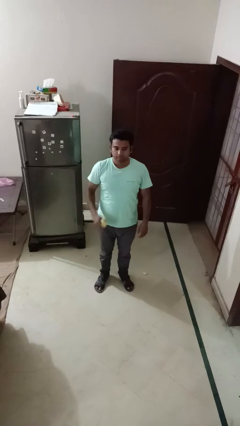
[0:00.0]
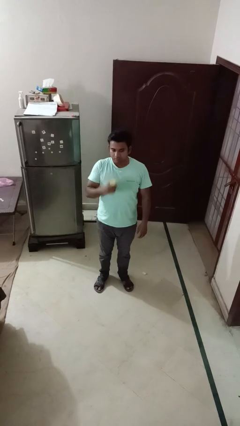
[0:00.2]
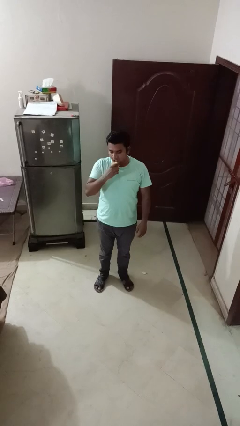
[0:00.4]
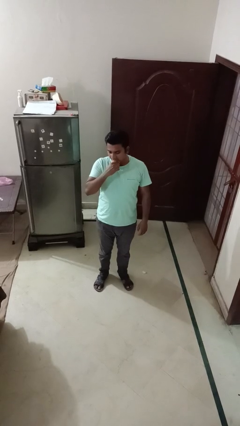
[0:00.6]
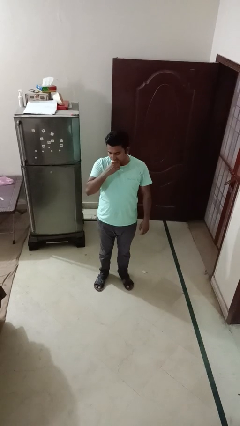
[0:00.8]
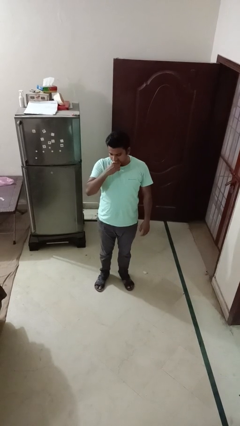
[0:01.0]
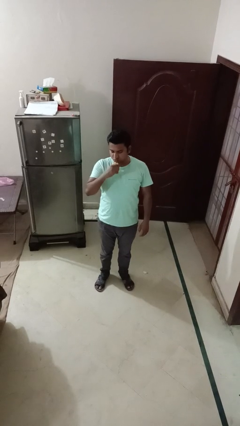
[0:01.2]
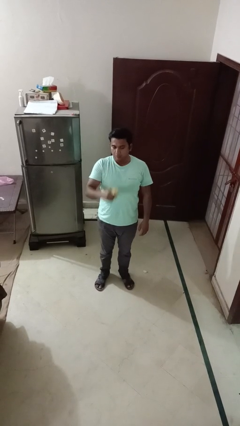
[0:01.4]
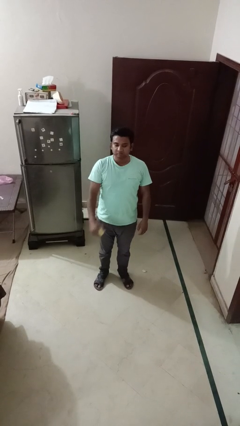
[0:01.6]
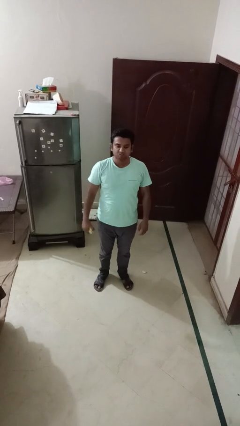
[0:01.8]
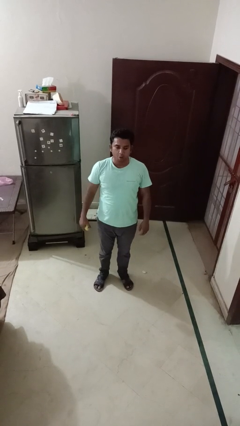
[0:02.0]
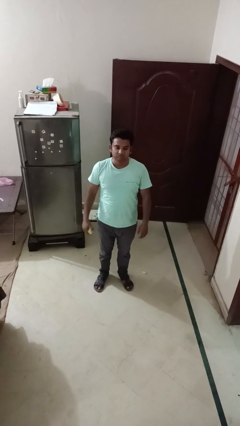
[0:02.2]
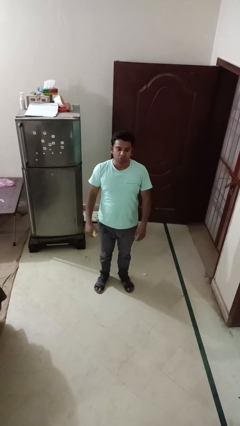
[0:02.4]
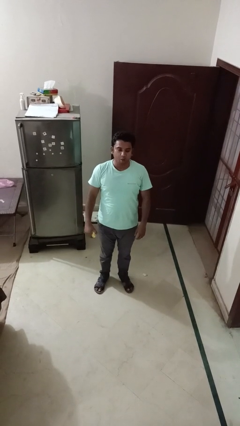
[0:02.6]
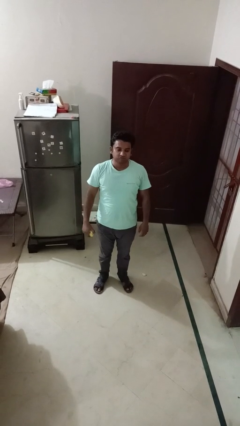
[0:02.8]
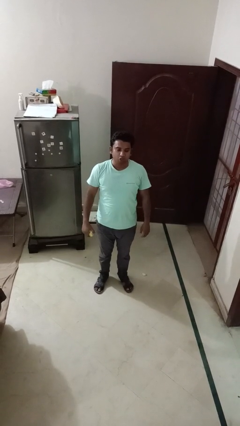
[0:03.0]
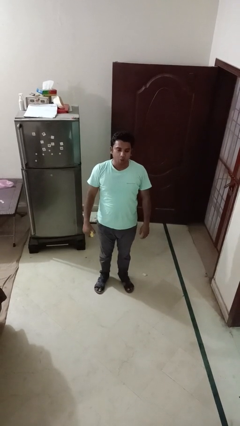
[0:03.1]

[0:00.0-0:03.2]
person eats apple

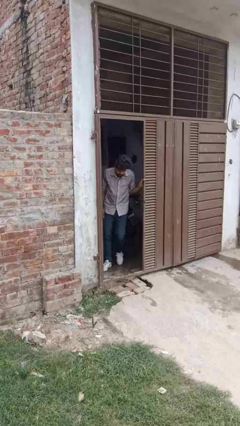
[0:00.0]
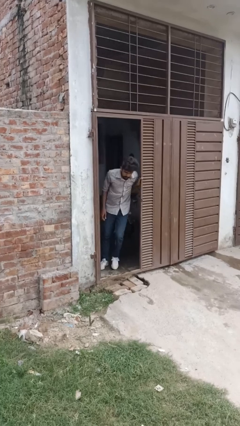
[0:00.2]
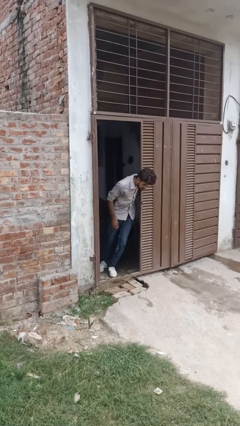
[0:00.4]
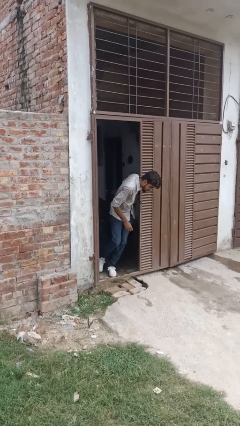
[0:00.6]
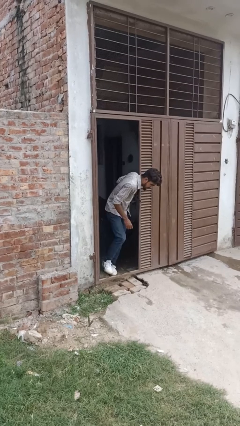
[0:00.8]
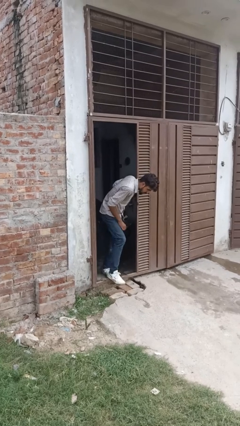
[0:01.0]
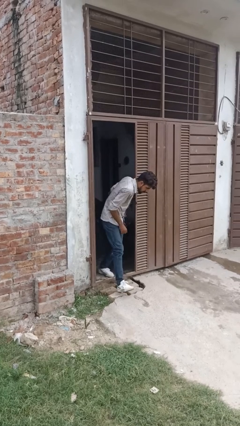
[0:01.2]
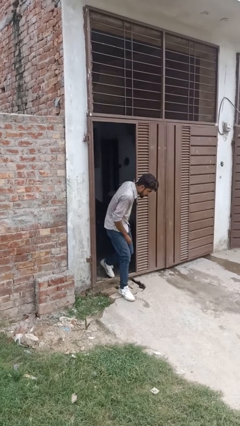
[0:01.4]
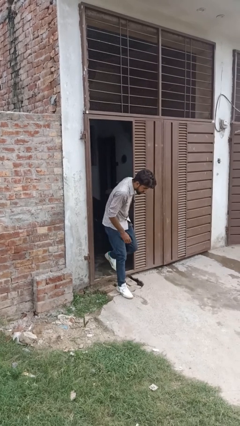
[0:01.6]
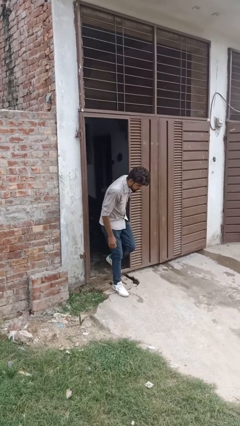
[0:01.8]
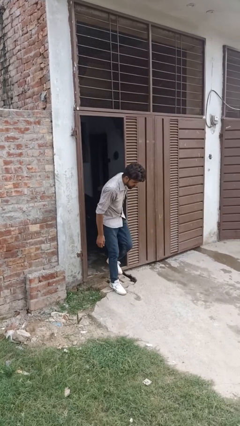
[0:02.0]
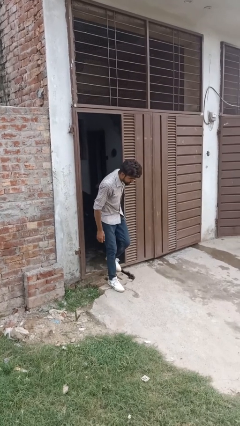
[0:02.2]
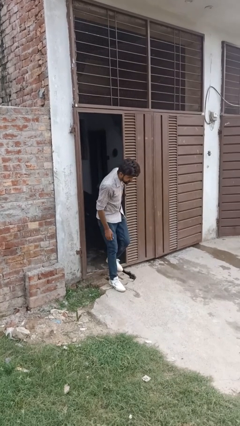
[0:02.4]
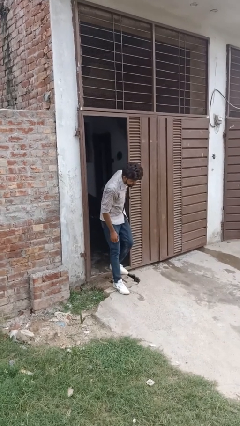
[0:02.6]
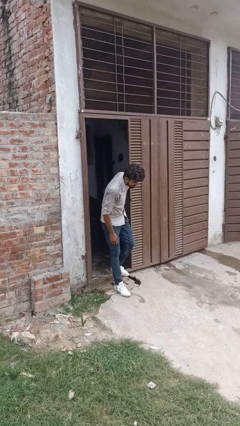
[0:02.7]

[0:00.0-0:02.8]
person bumps into wall

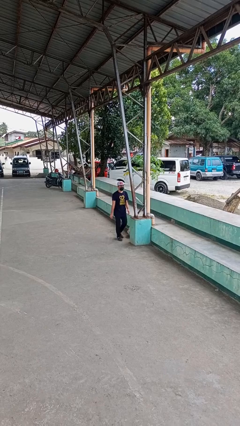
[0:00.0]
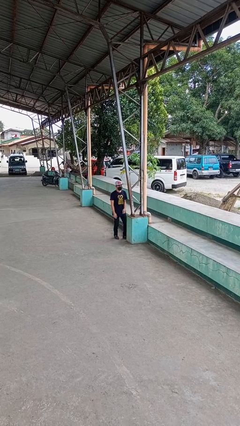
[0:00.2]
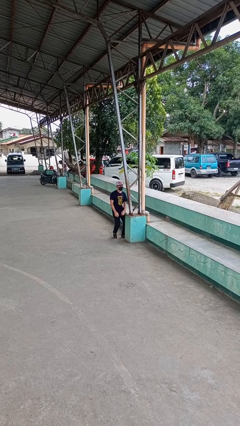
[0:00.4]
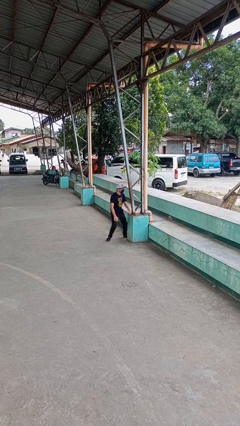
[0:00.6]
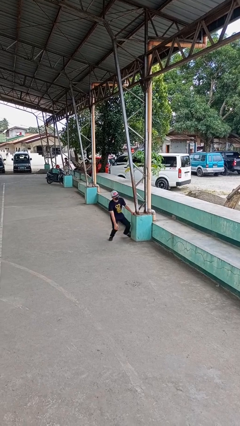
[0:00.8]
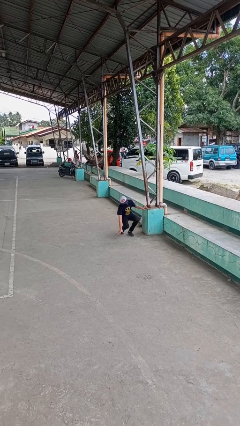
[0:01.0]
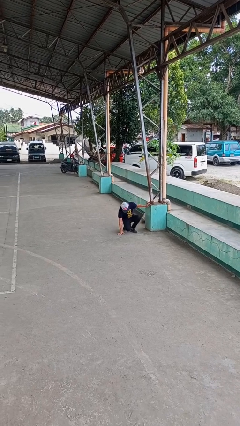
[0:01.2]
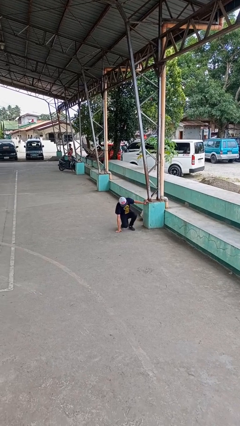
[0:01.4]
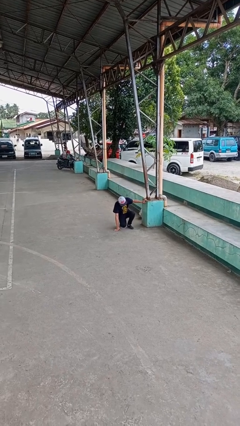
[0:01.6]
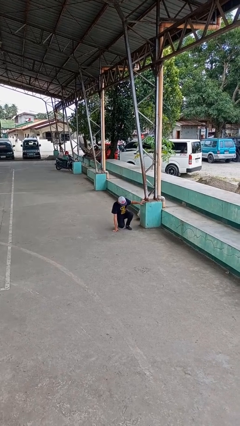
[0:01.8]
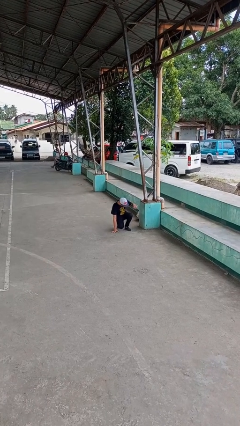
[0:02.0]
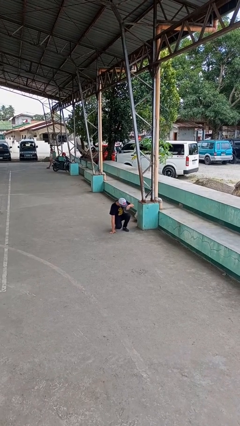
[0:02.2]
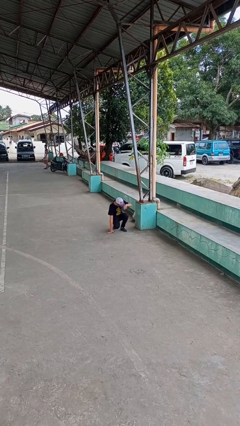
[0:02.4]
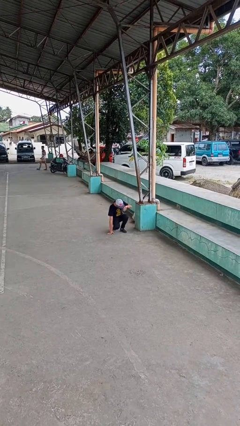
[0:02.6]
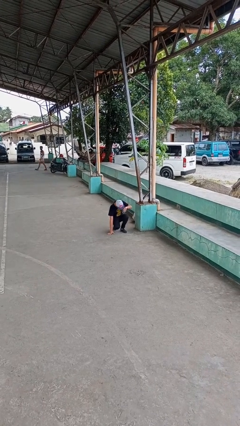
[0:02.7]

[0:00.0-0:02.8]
person trips on object on floor

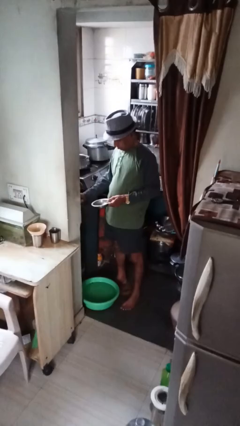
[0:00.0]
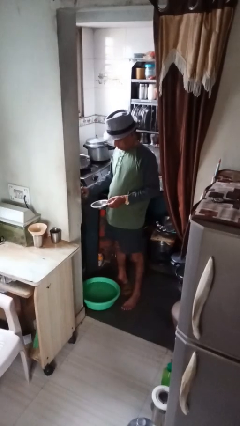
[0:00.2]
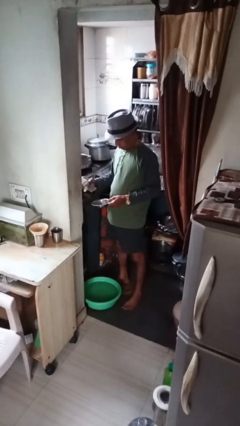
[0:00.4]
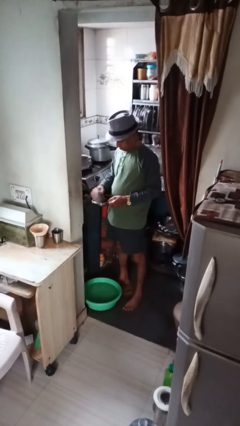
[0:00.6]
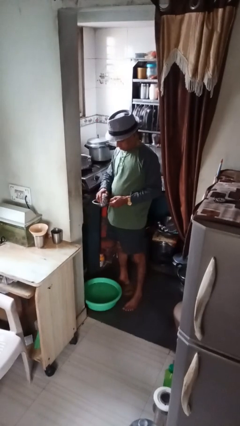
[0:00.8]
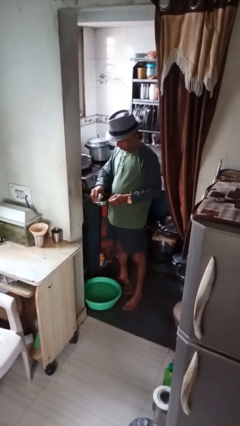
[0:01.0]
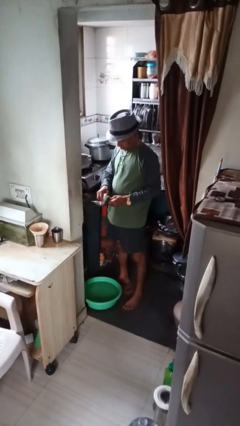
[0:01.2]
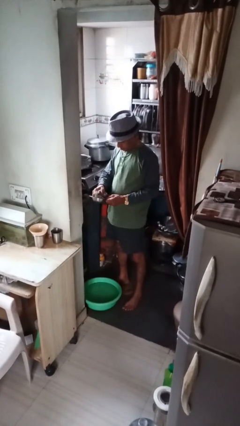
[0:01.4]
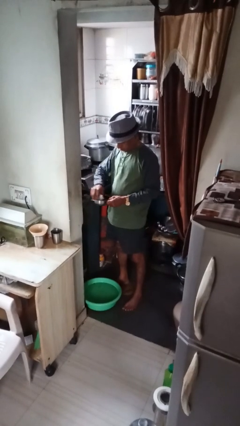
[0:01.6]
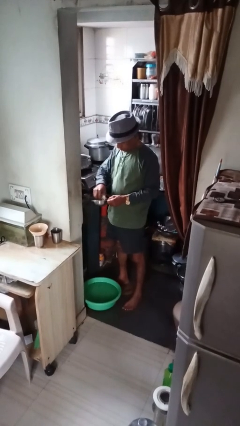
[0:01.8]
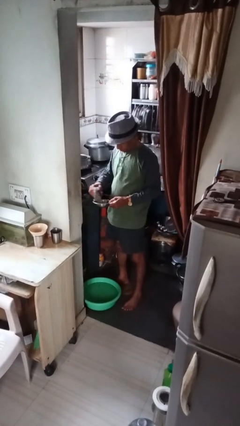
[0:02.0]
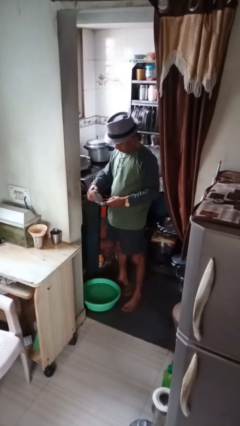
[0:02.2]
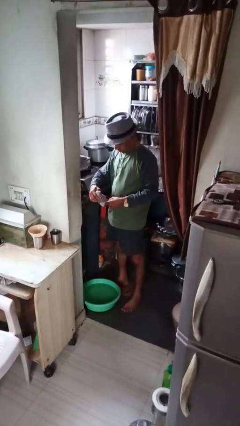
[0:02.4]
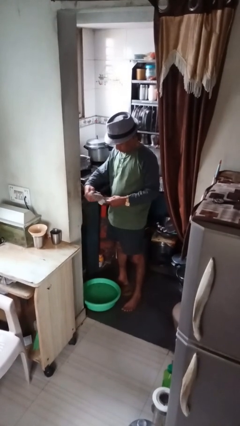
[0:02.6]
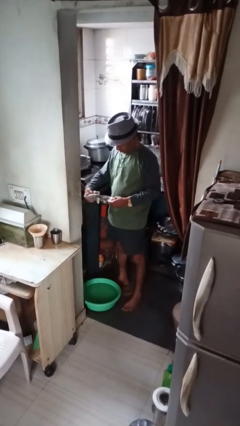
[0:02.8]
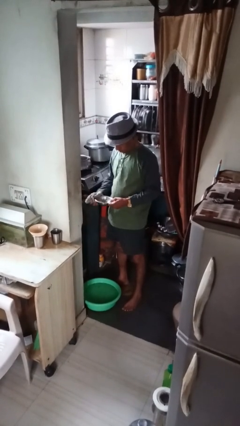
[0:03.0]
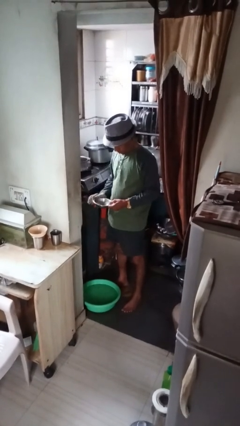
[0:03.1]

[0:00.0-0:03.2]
person dries dish

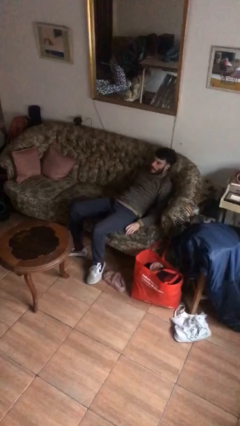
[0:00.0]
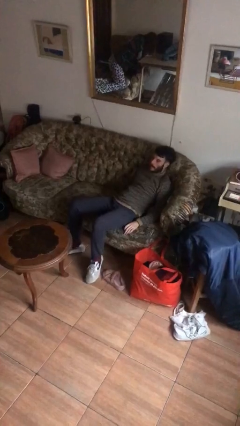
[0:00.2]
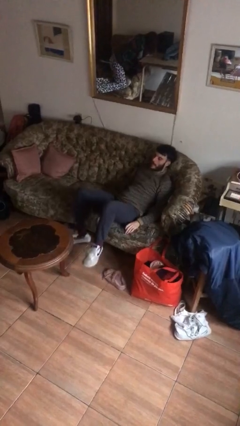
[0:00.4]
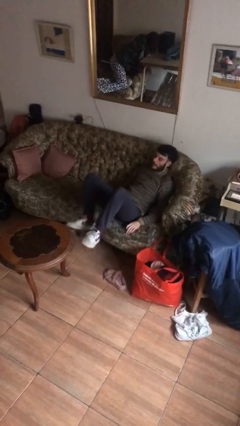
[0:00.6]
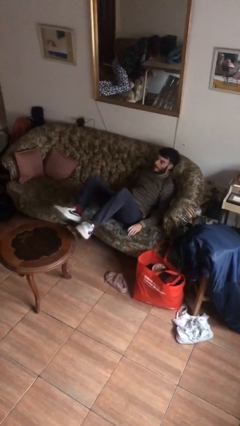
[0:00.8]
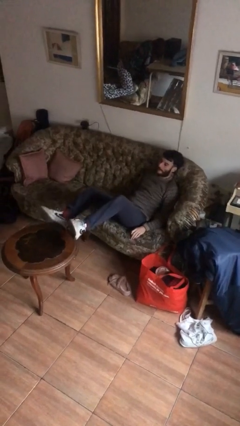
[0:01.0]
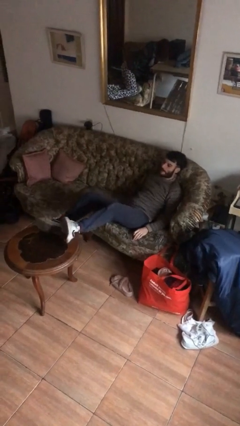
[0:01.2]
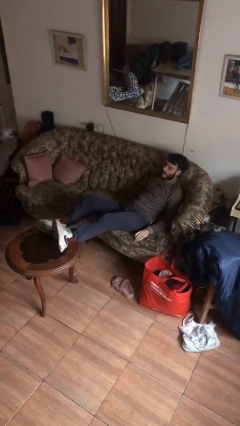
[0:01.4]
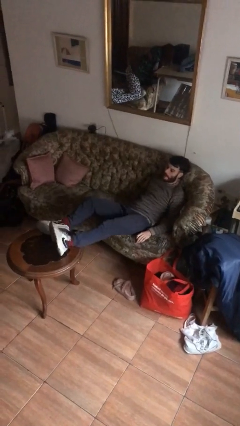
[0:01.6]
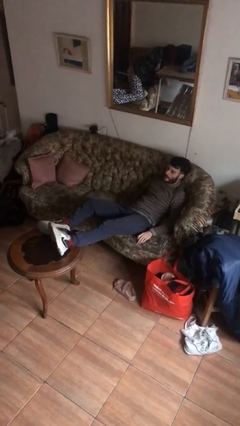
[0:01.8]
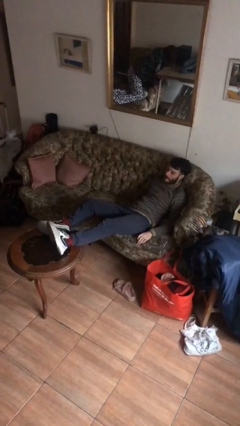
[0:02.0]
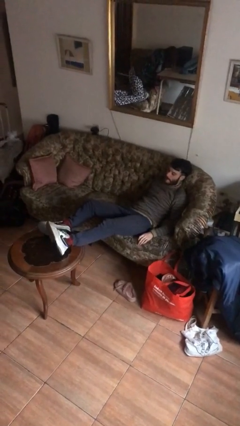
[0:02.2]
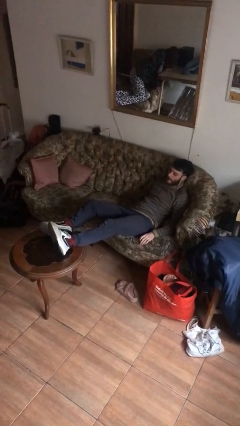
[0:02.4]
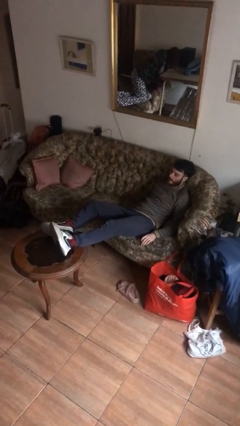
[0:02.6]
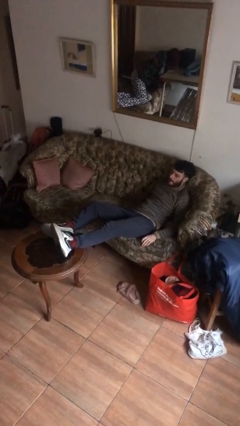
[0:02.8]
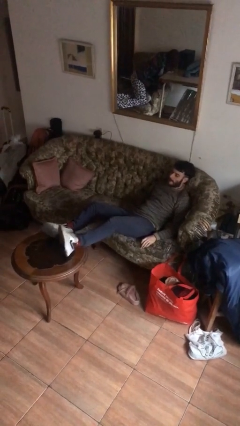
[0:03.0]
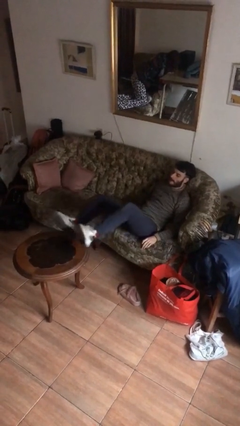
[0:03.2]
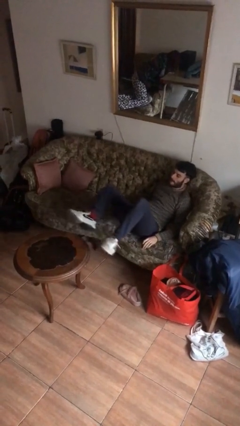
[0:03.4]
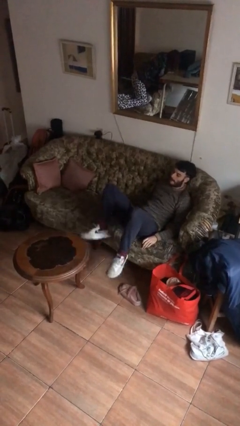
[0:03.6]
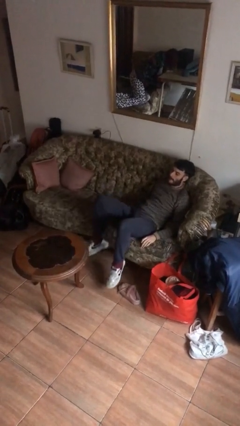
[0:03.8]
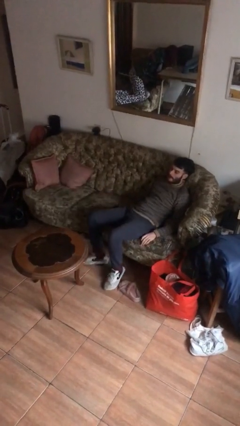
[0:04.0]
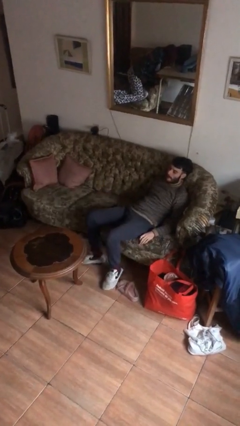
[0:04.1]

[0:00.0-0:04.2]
person puts feet up

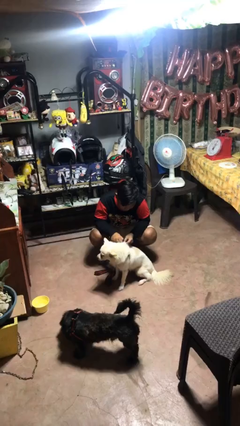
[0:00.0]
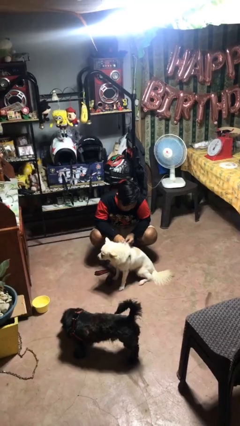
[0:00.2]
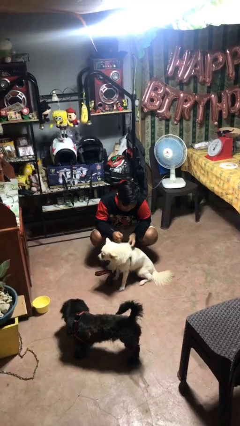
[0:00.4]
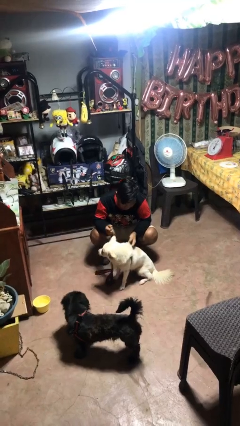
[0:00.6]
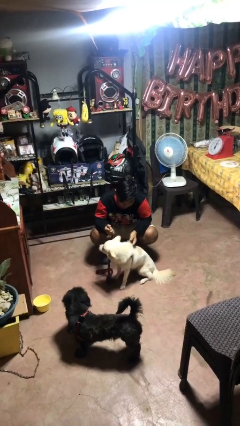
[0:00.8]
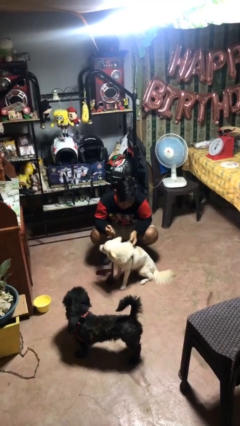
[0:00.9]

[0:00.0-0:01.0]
person unattaches leash from dog

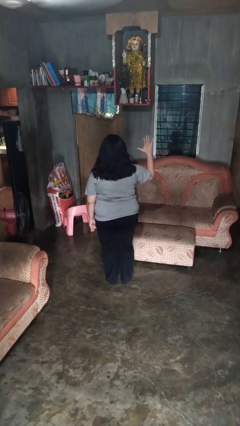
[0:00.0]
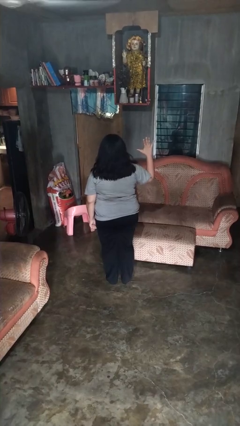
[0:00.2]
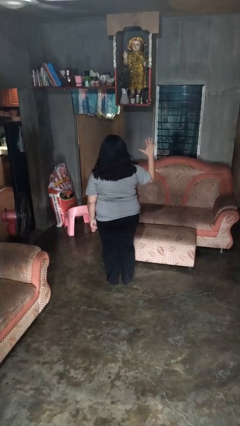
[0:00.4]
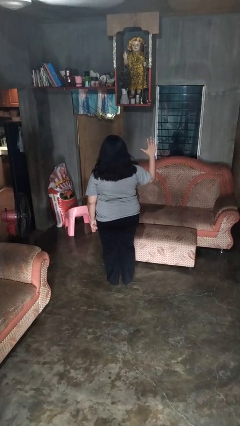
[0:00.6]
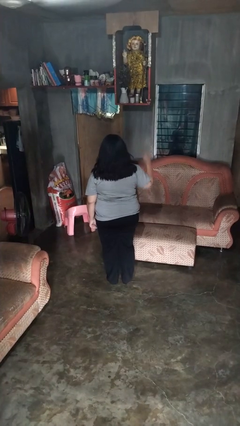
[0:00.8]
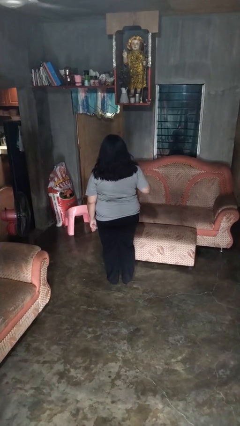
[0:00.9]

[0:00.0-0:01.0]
person gestures number five
